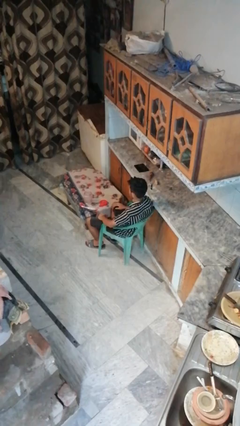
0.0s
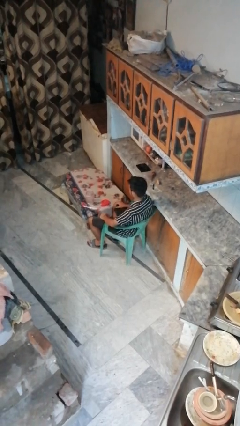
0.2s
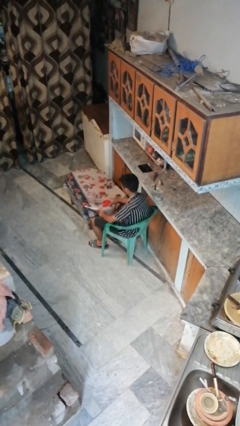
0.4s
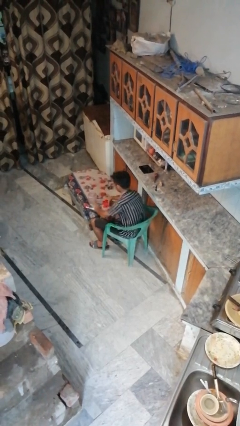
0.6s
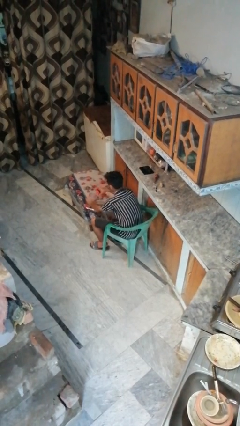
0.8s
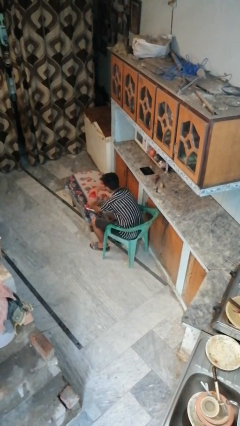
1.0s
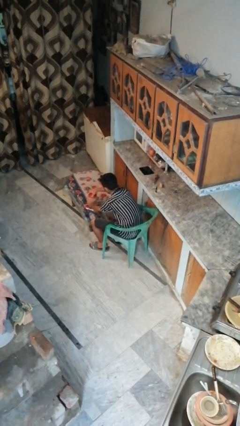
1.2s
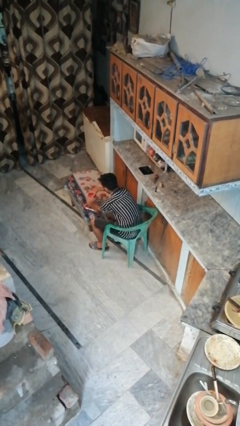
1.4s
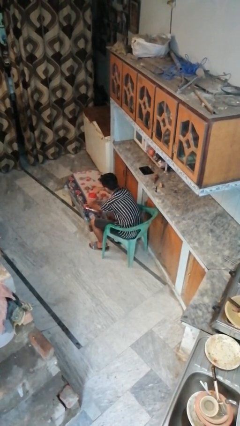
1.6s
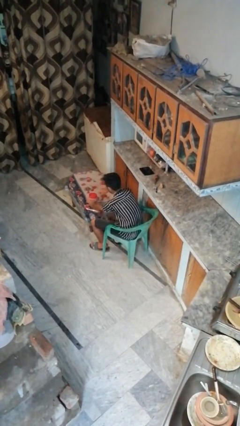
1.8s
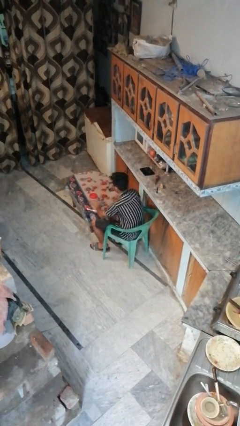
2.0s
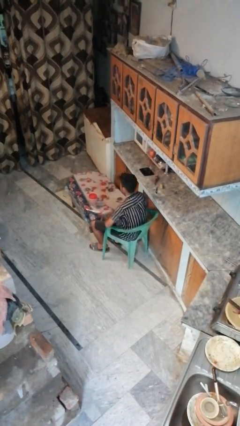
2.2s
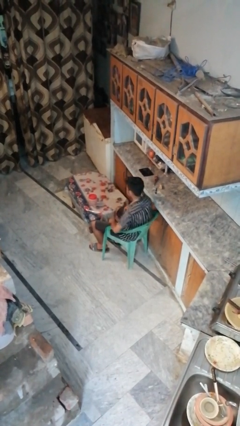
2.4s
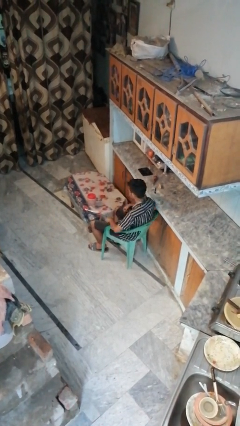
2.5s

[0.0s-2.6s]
person closes jar

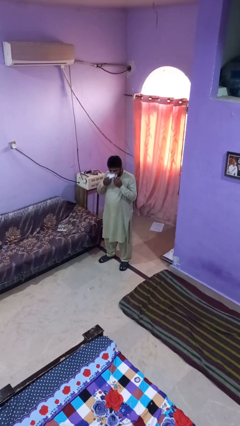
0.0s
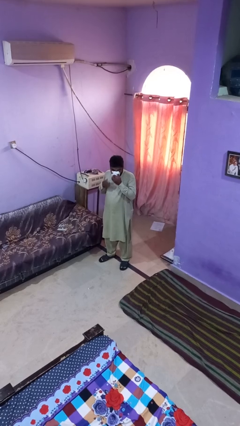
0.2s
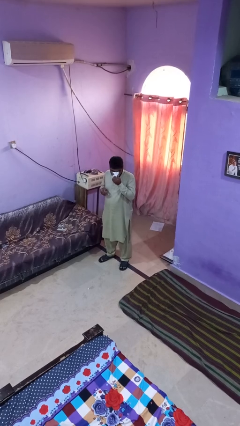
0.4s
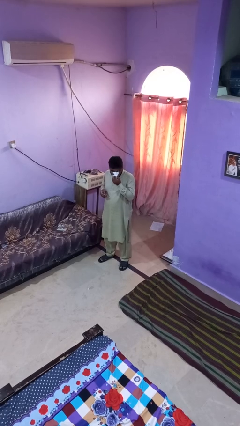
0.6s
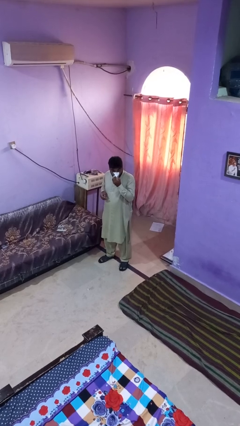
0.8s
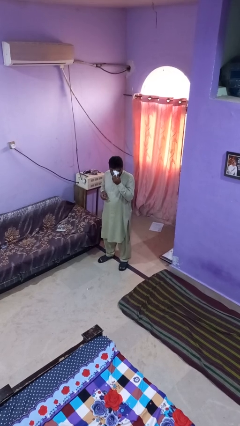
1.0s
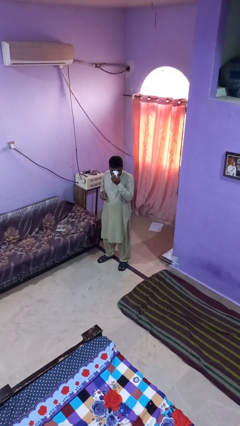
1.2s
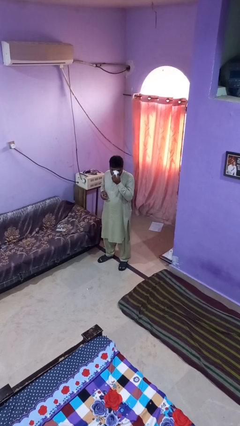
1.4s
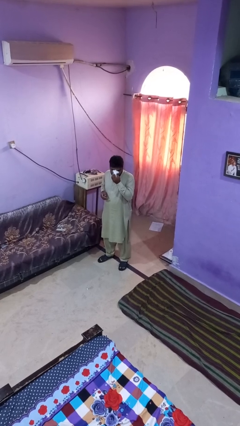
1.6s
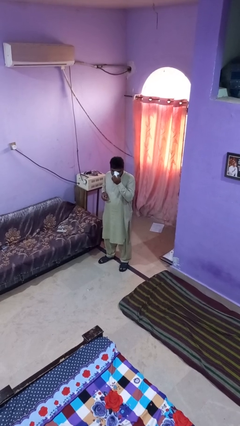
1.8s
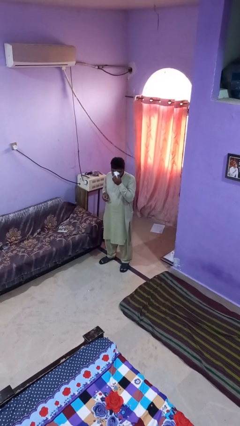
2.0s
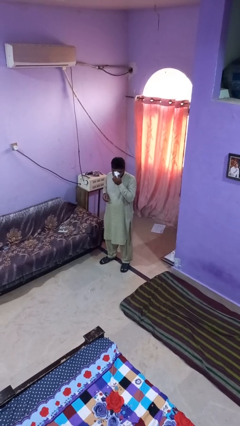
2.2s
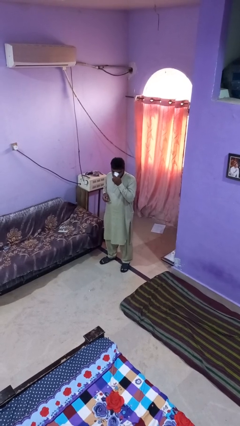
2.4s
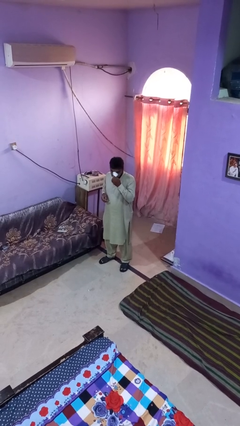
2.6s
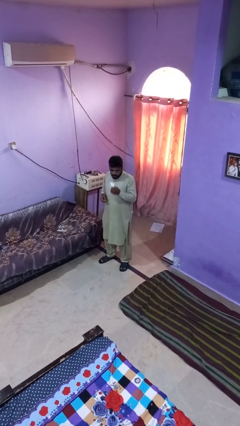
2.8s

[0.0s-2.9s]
person blows nose

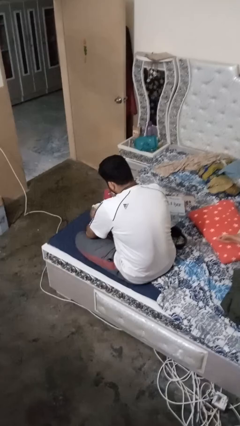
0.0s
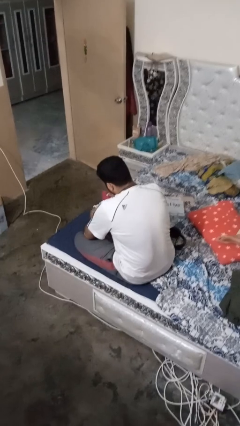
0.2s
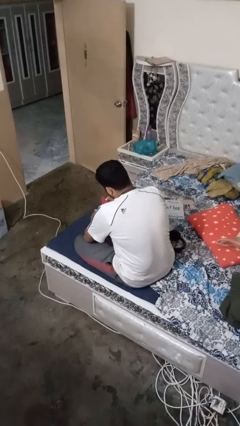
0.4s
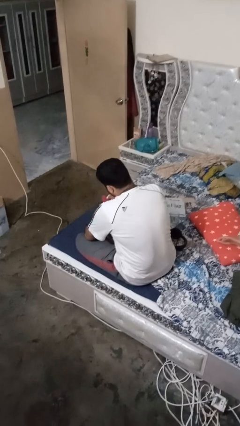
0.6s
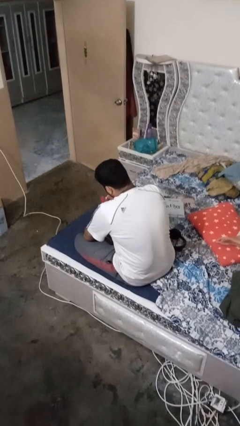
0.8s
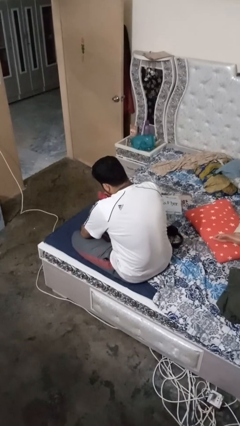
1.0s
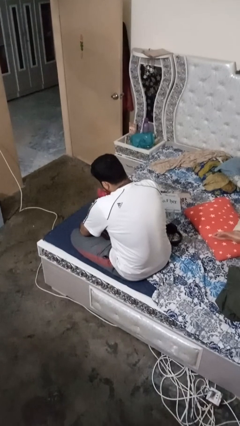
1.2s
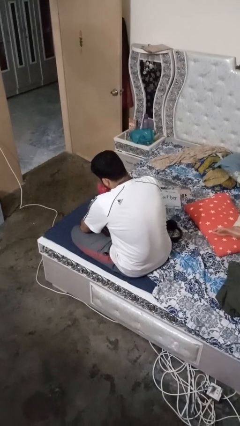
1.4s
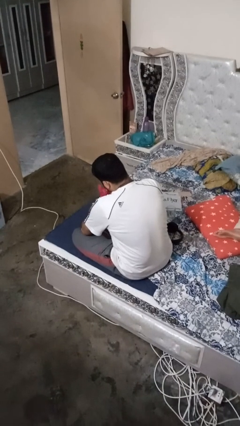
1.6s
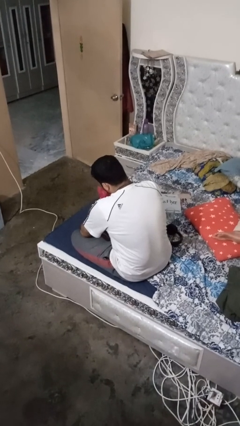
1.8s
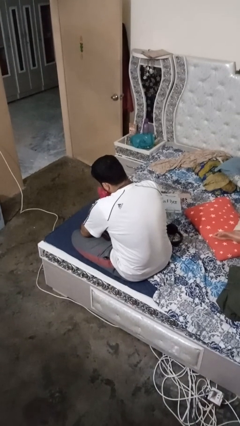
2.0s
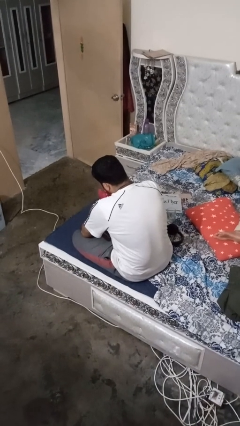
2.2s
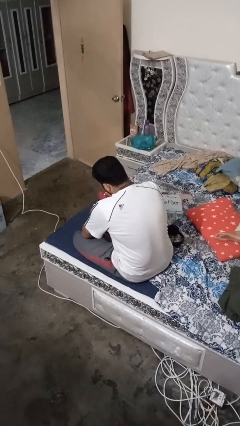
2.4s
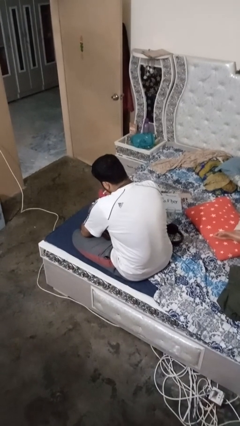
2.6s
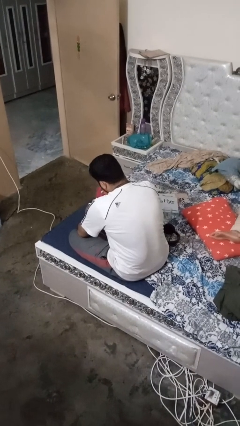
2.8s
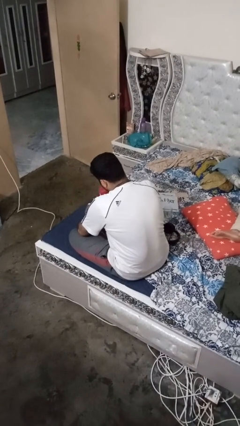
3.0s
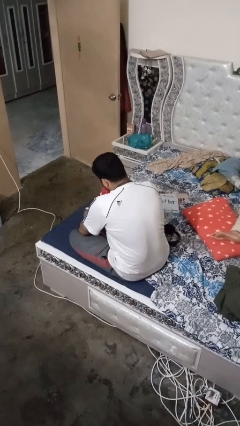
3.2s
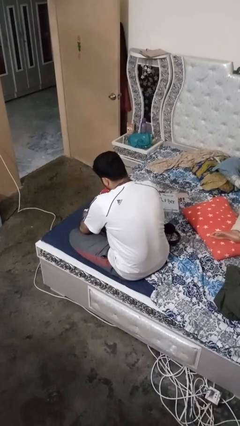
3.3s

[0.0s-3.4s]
person pours liquid into cup

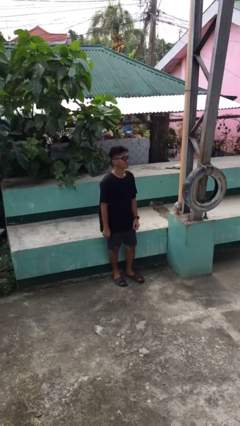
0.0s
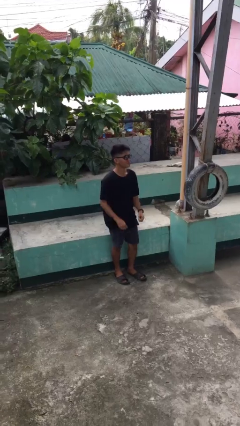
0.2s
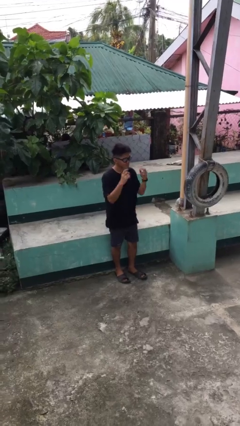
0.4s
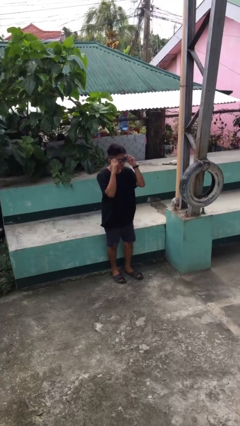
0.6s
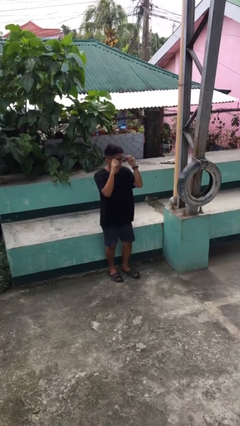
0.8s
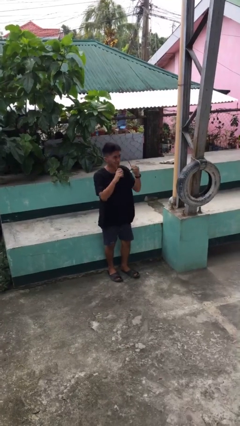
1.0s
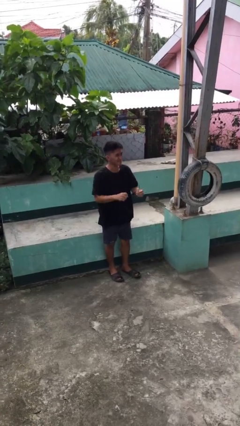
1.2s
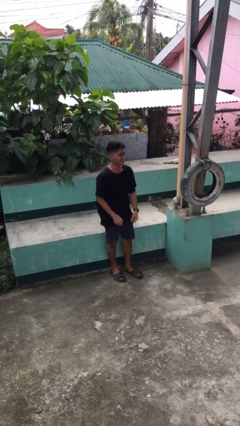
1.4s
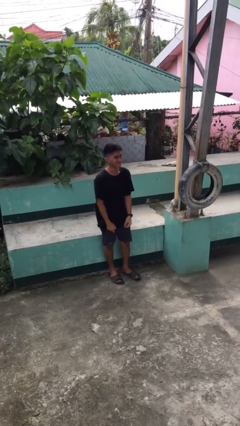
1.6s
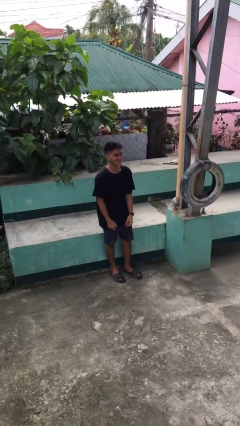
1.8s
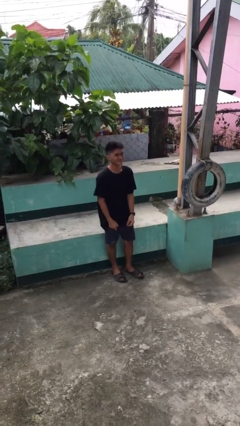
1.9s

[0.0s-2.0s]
person takes off sunglasses

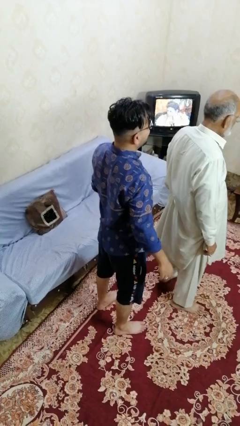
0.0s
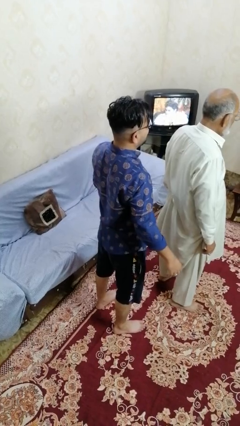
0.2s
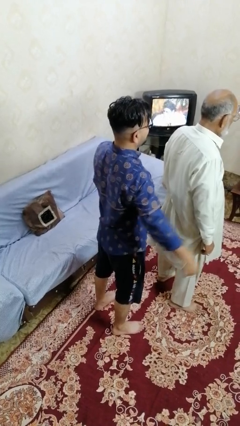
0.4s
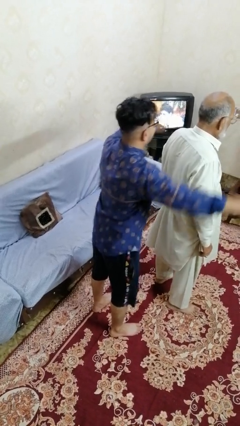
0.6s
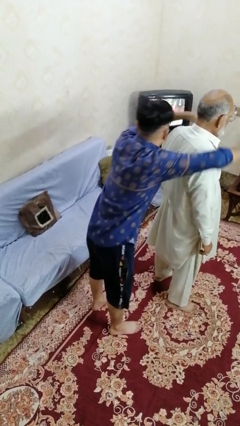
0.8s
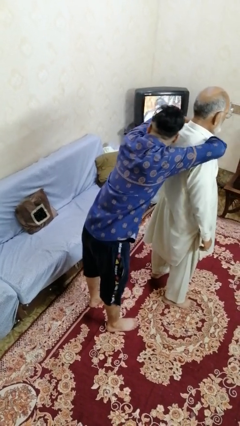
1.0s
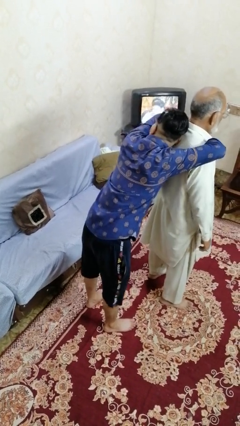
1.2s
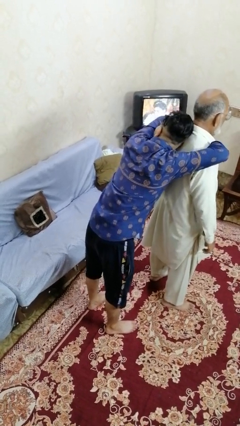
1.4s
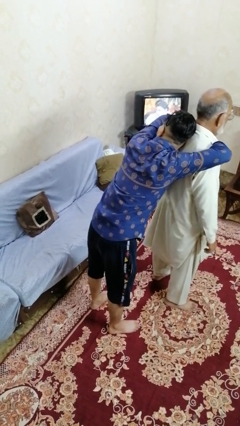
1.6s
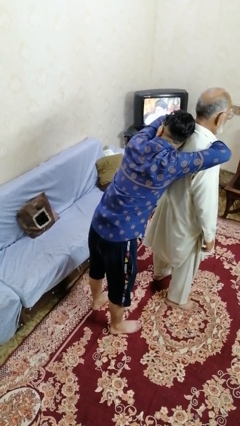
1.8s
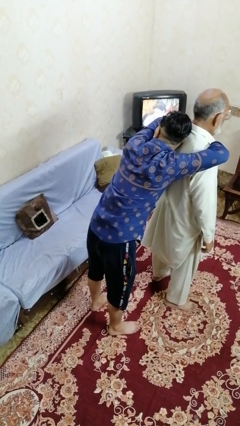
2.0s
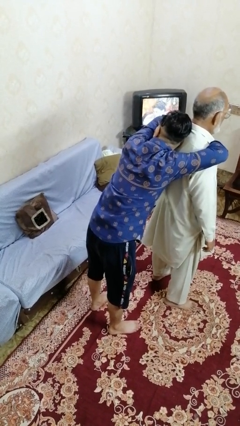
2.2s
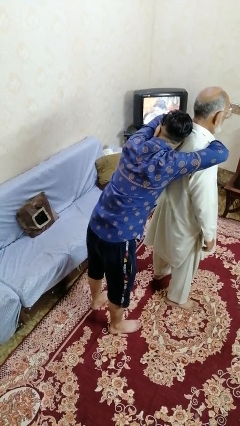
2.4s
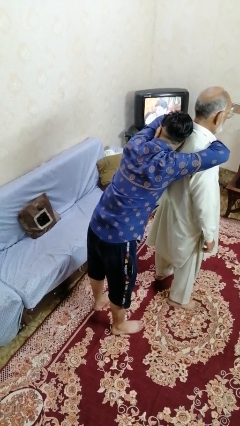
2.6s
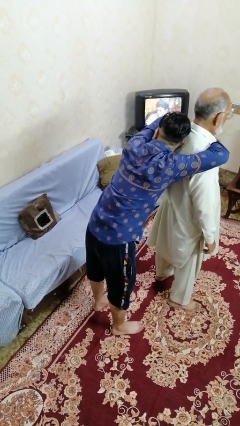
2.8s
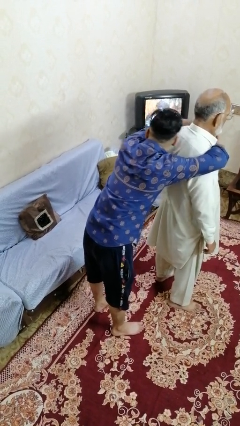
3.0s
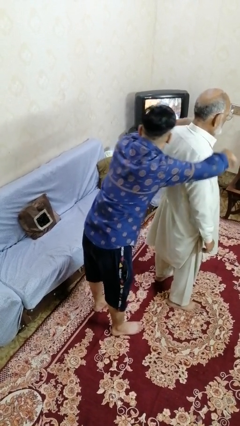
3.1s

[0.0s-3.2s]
person hugs person from behind

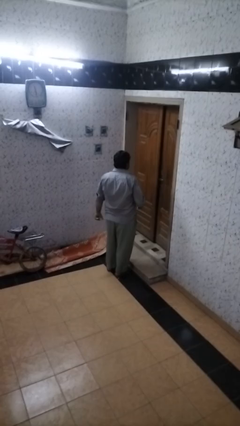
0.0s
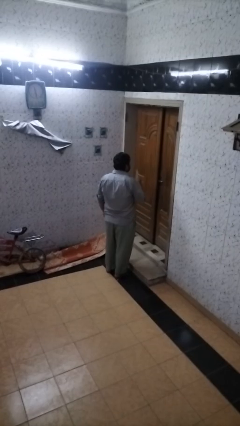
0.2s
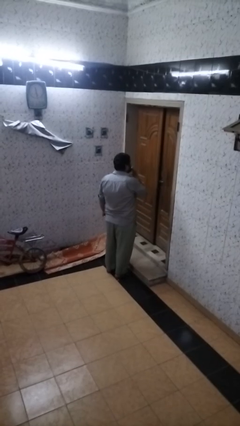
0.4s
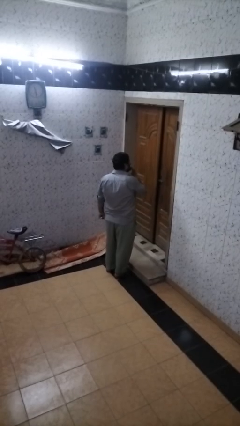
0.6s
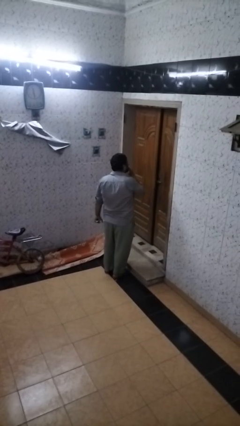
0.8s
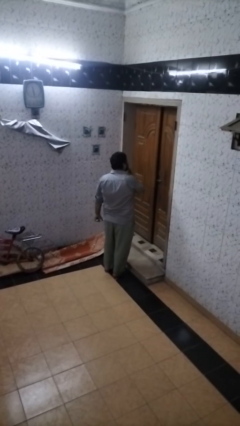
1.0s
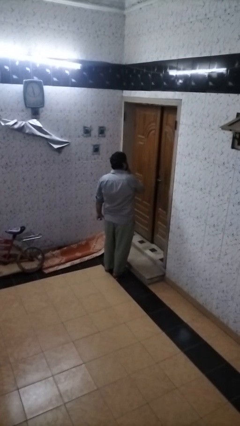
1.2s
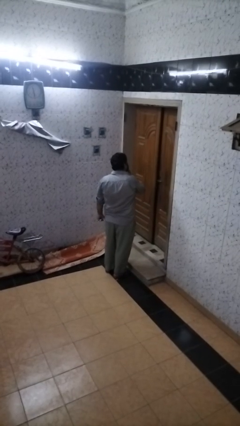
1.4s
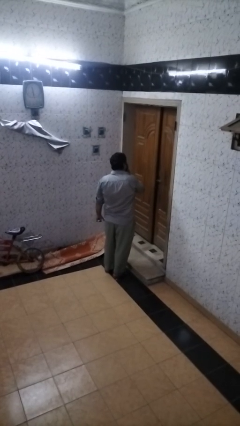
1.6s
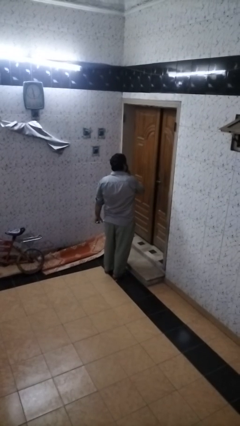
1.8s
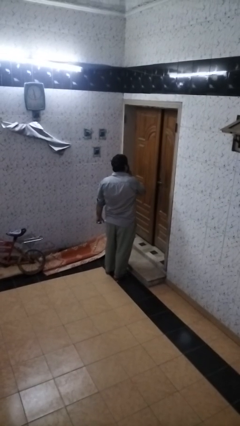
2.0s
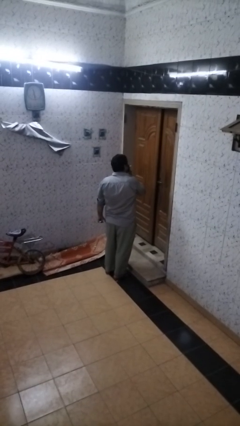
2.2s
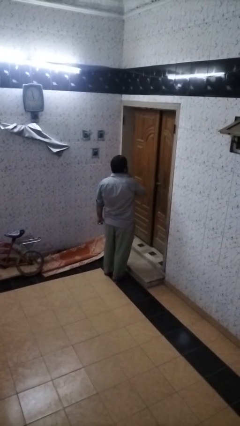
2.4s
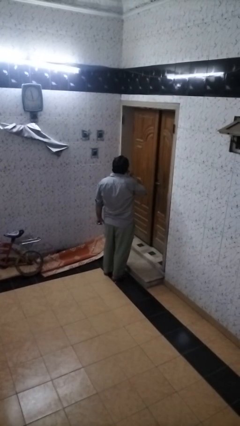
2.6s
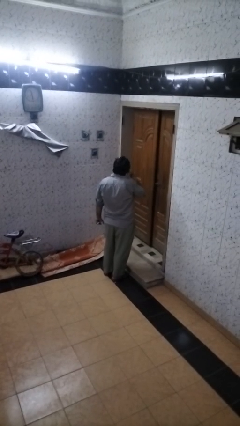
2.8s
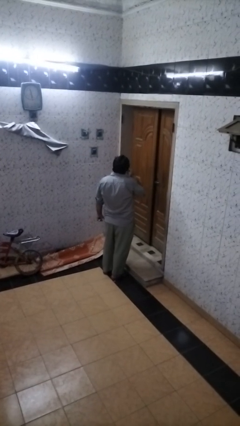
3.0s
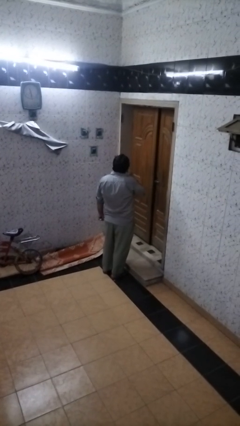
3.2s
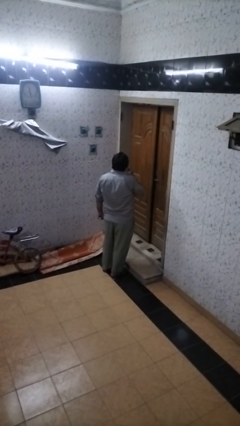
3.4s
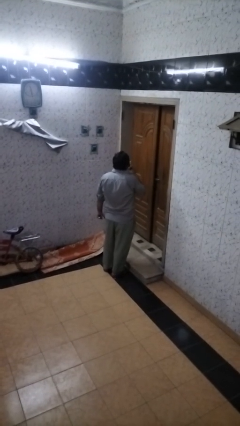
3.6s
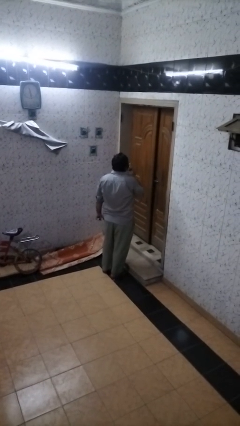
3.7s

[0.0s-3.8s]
person brushes teeth
